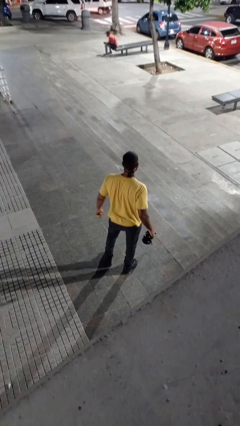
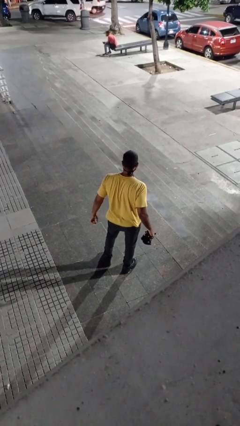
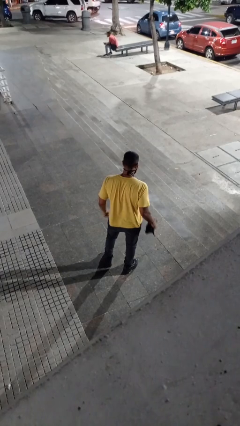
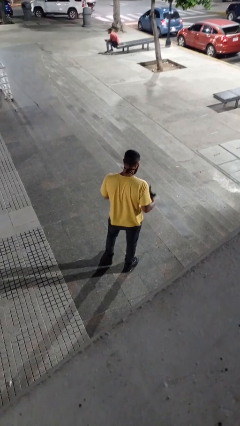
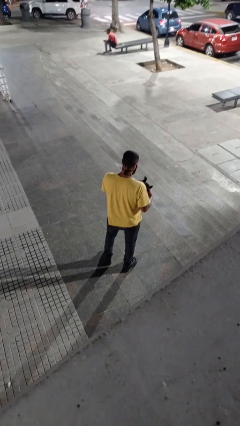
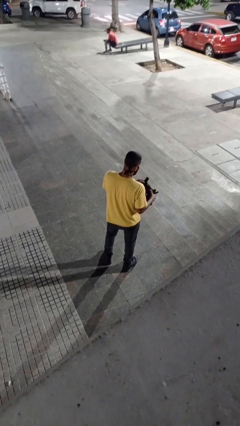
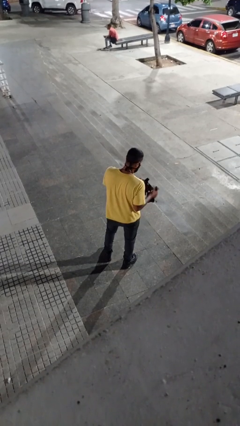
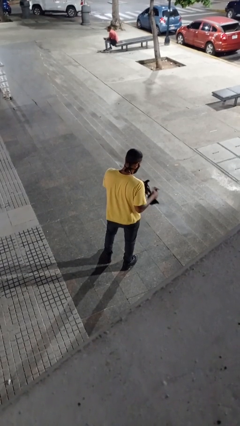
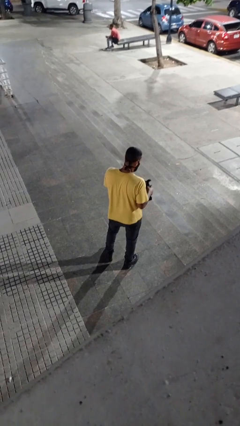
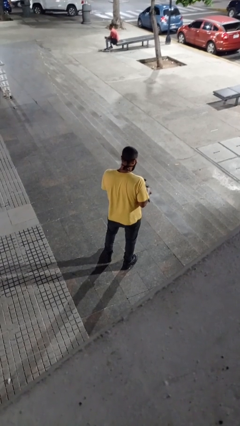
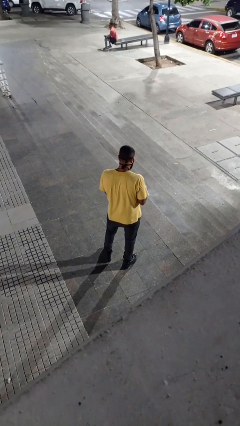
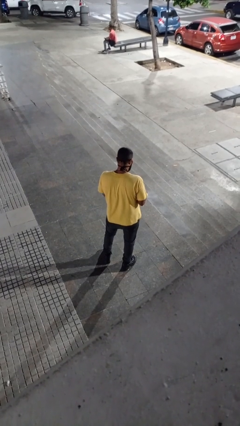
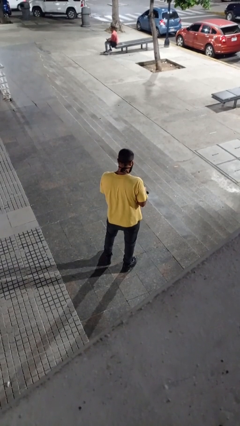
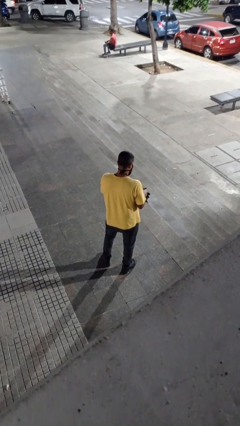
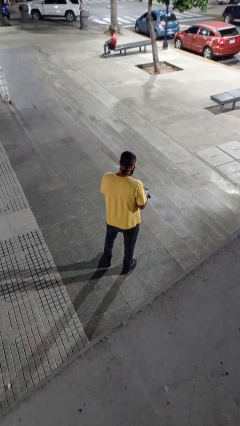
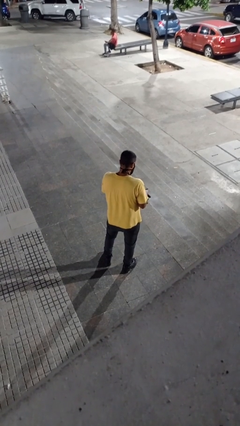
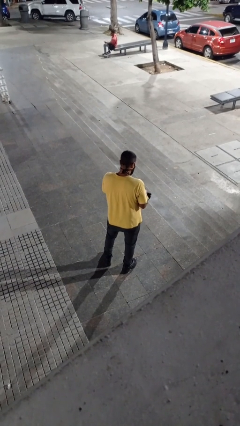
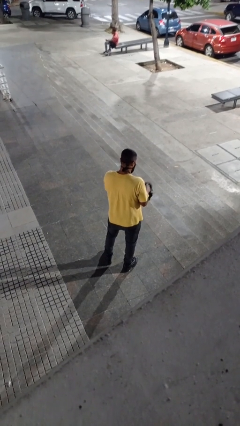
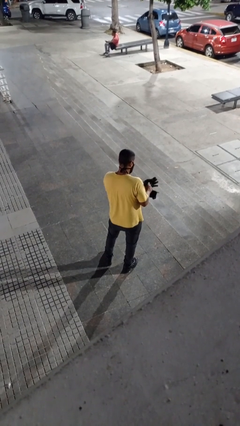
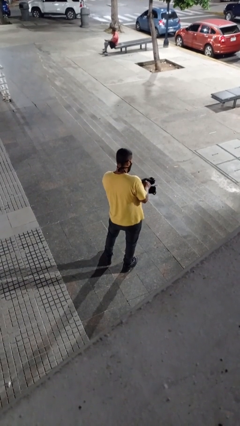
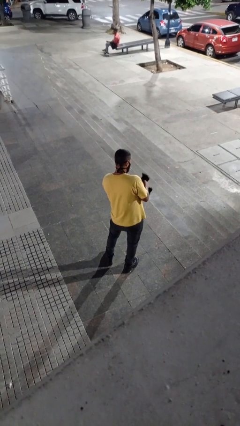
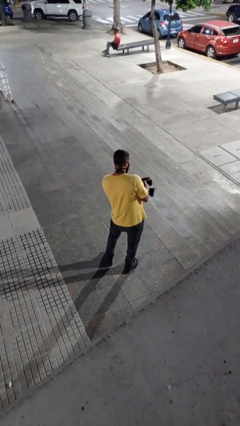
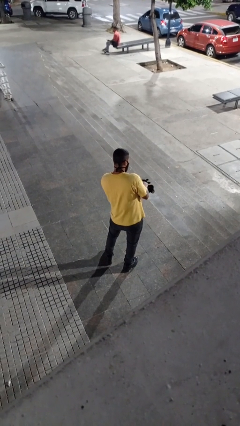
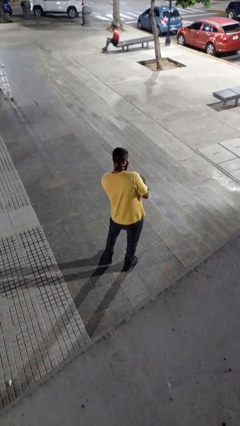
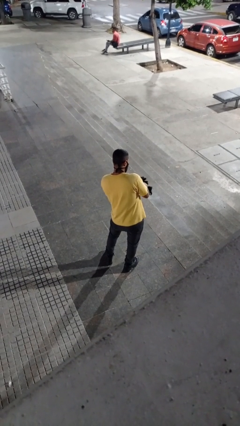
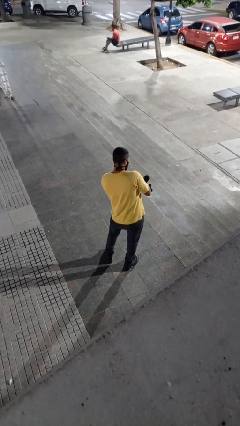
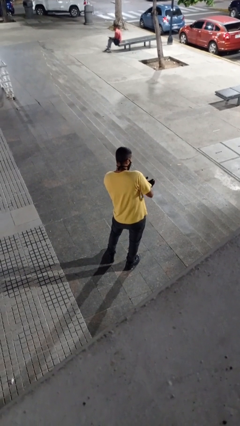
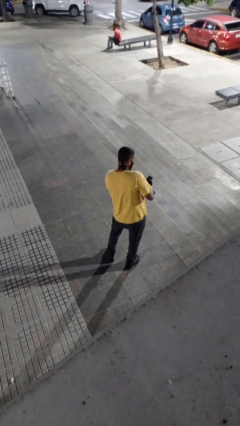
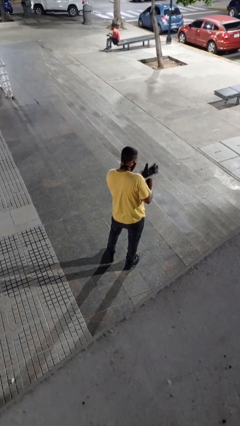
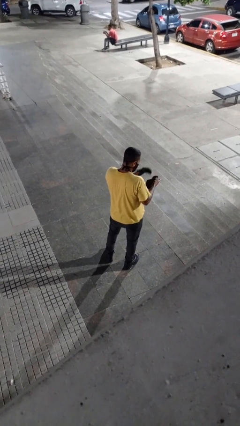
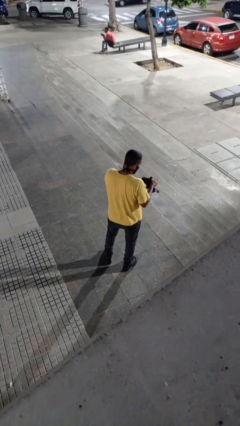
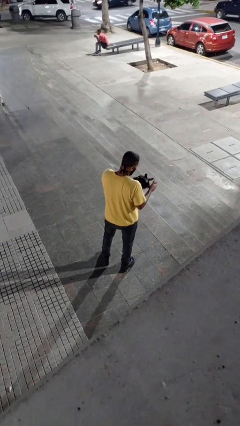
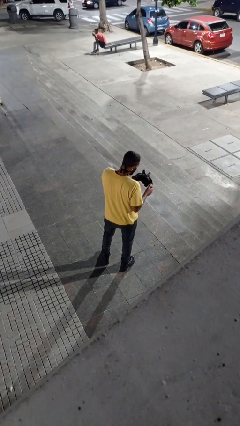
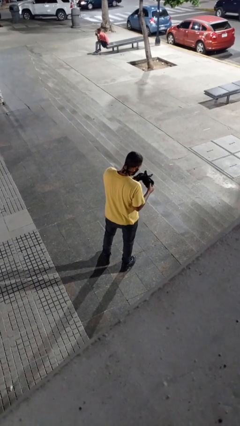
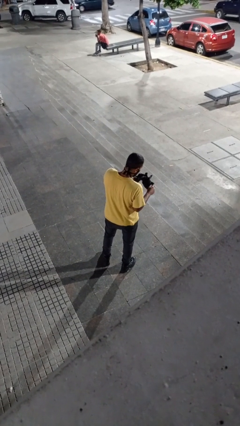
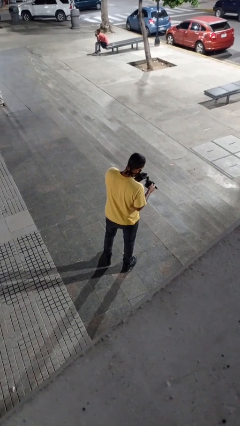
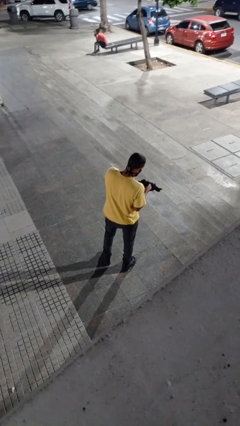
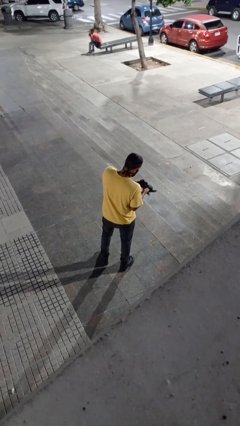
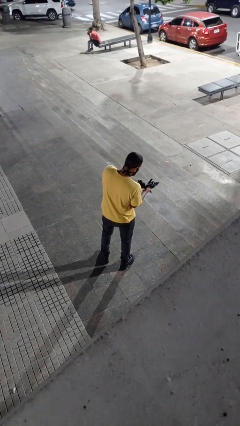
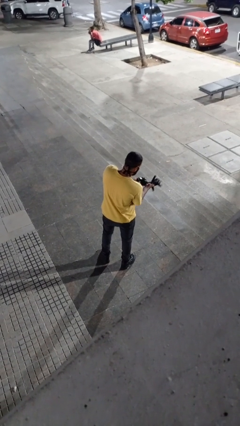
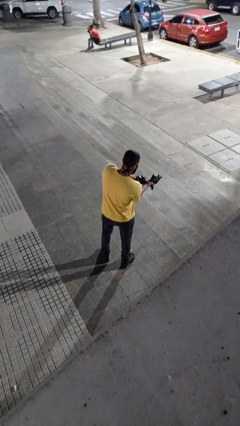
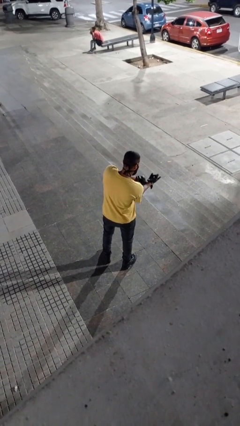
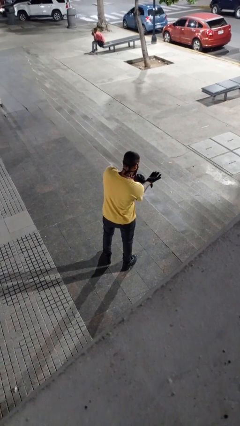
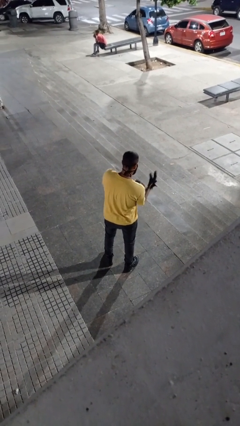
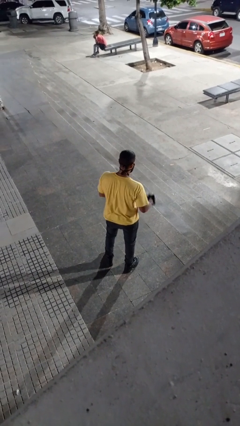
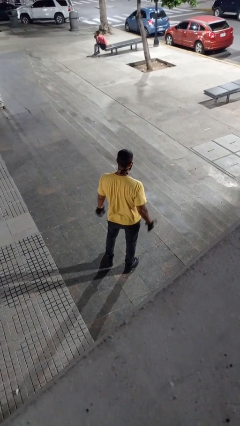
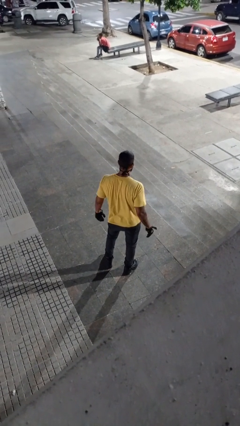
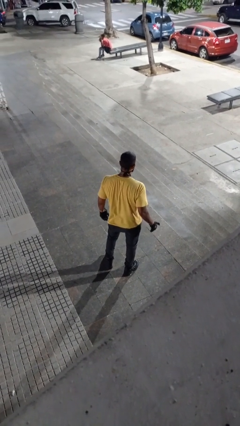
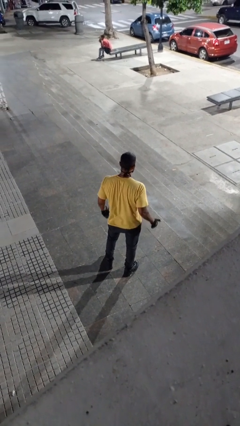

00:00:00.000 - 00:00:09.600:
person puts on gloves

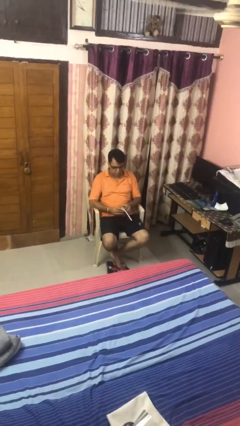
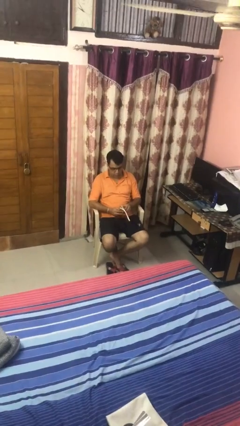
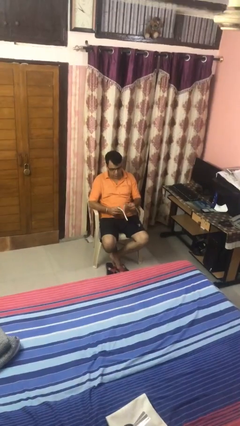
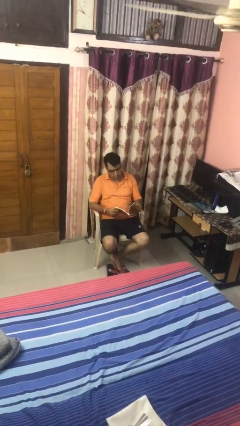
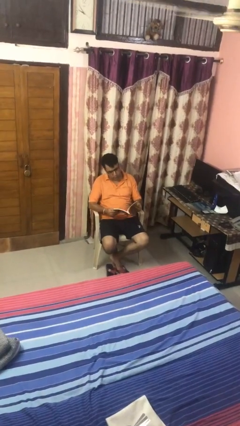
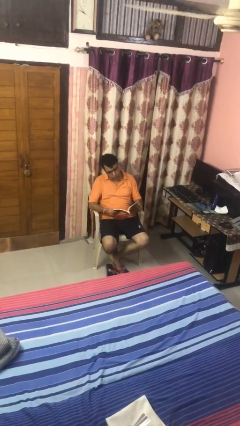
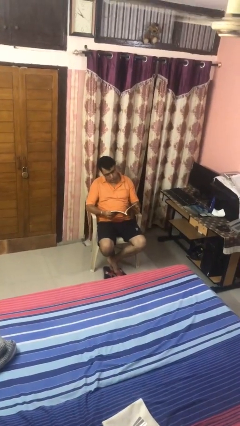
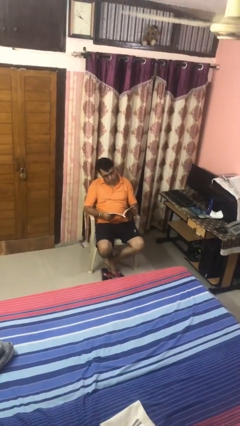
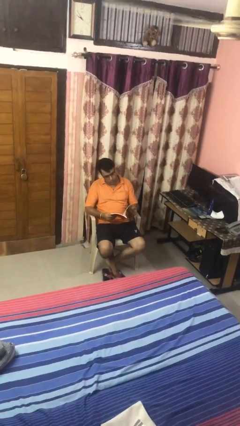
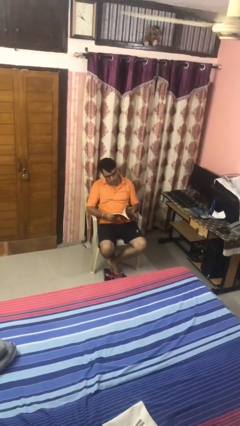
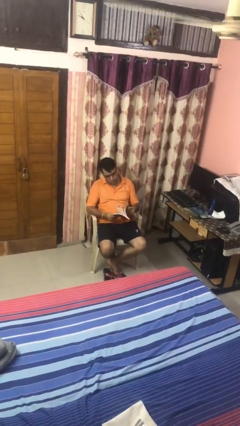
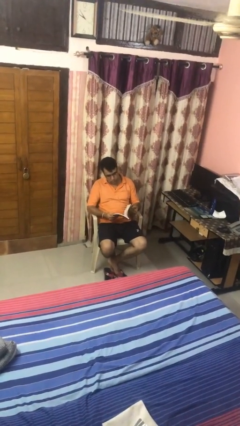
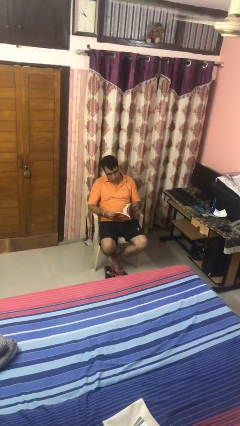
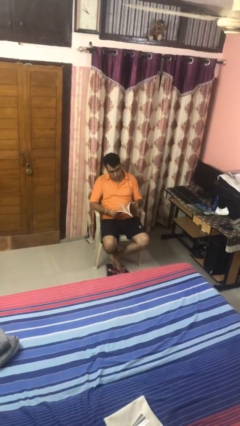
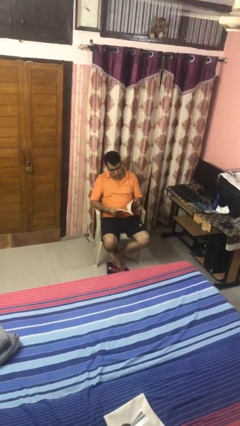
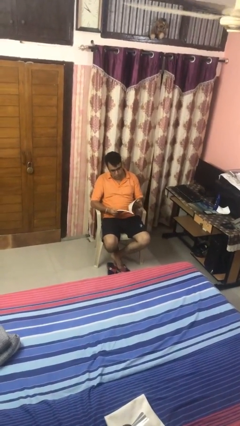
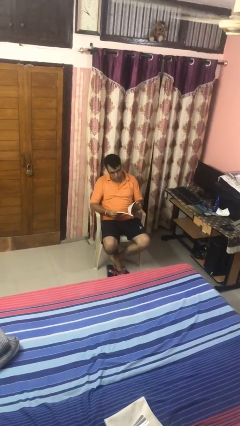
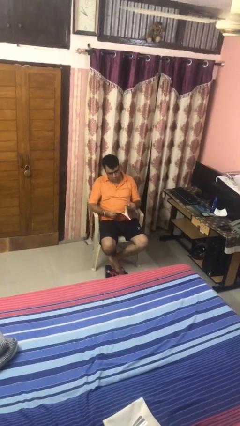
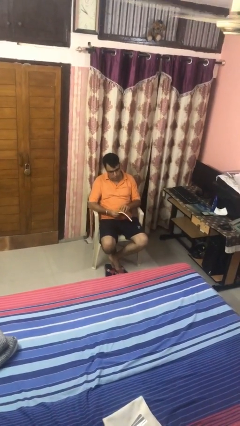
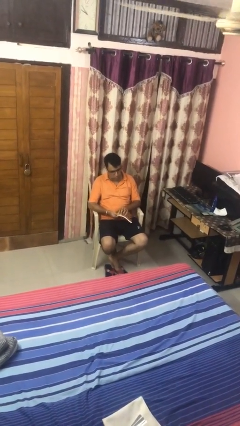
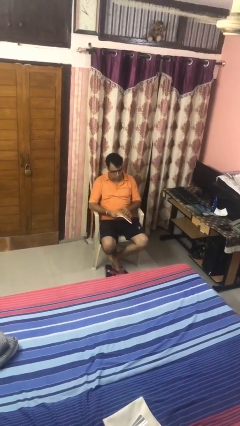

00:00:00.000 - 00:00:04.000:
person reads magazine

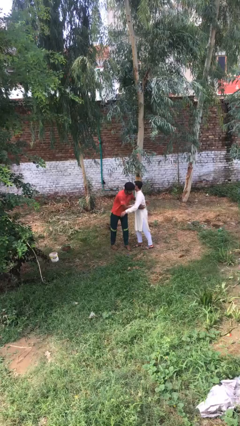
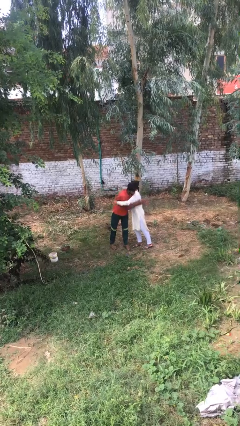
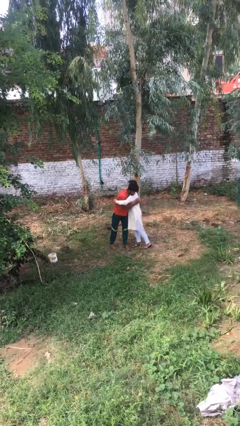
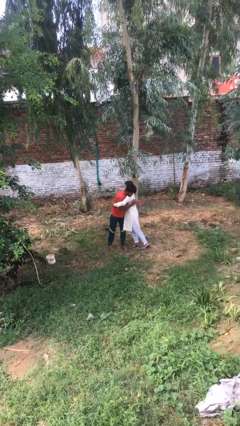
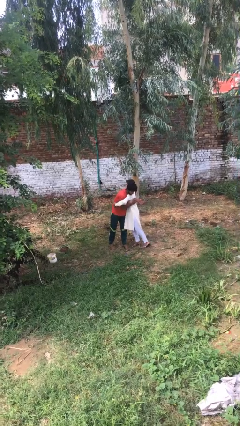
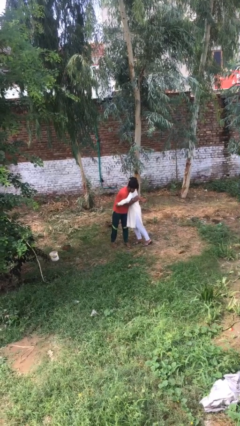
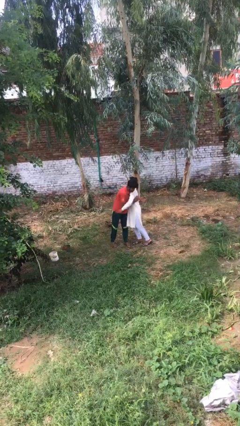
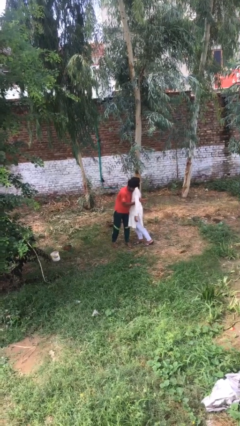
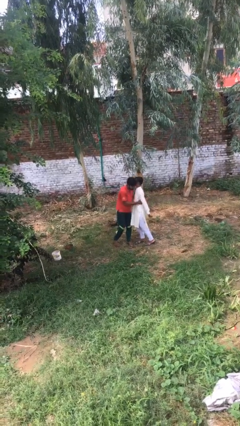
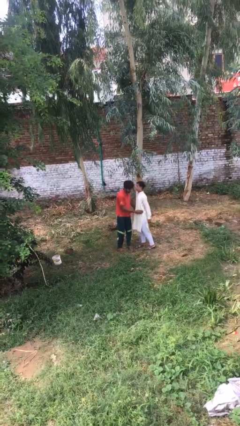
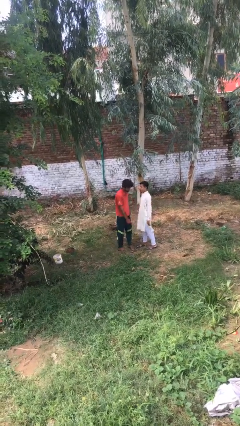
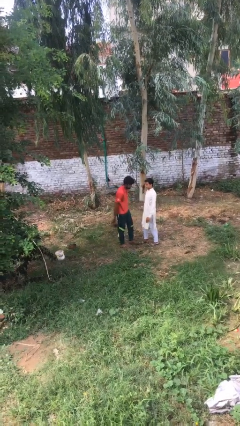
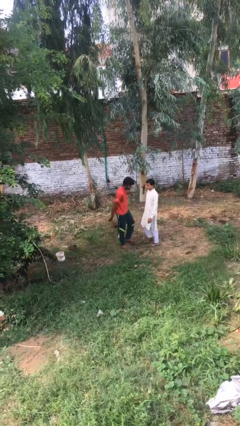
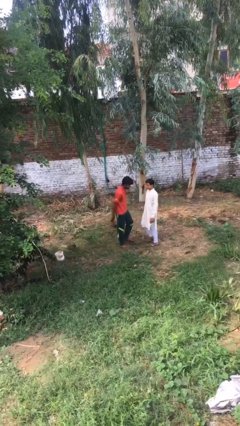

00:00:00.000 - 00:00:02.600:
person embraces person

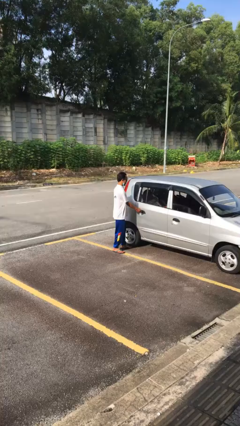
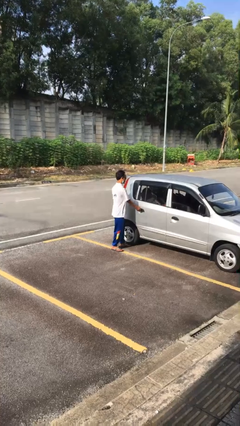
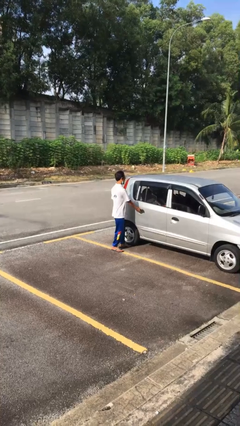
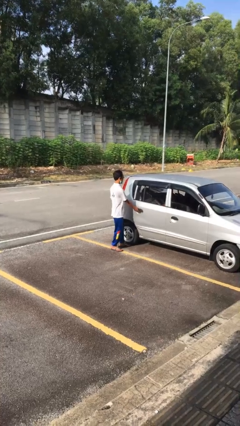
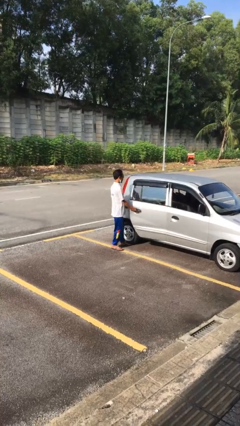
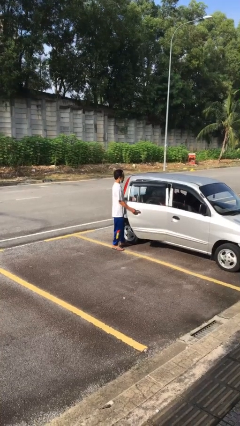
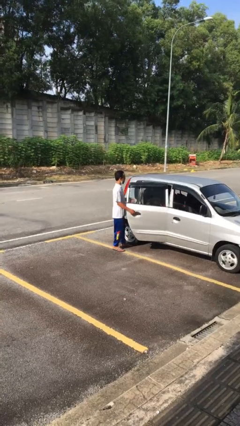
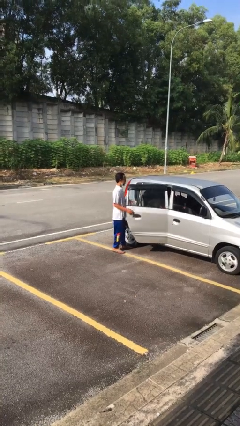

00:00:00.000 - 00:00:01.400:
person opens car door

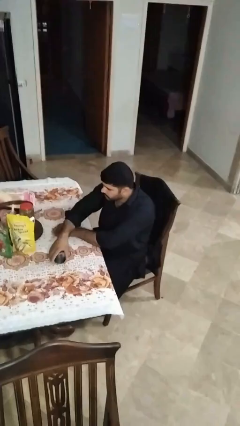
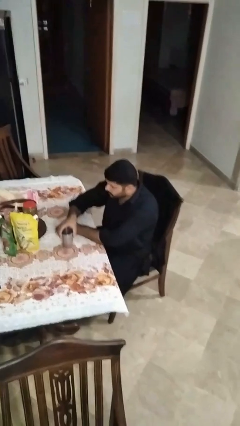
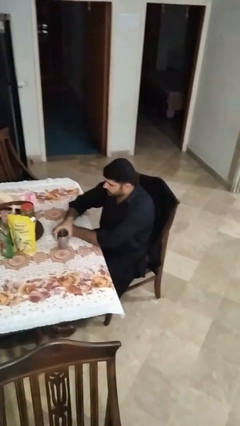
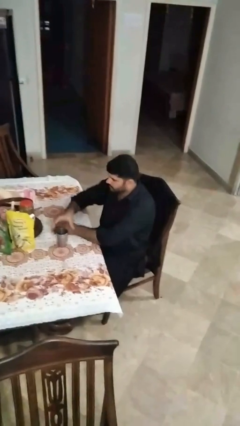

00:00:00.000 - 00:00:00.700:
person sets upright glass
